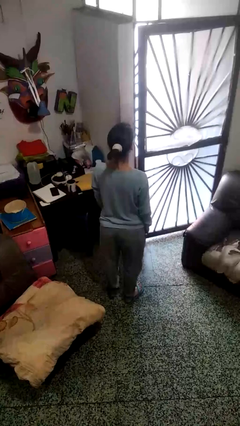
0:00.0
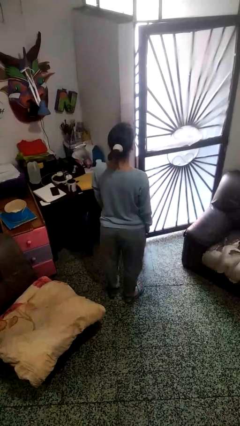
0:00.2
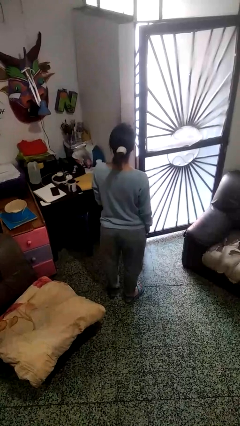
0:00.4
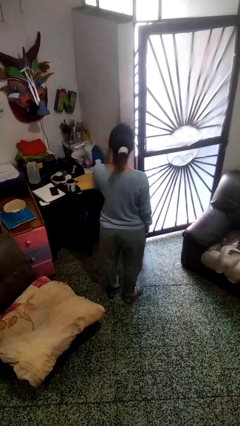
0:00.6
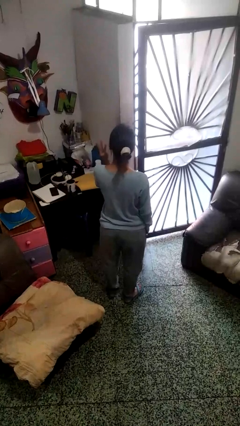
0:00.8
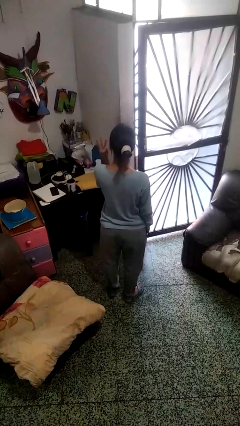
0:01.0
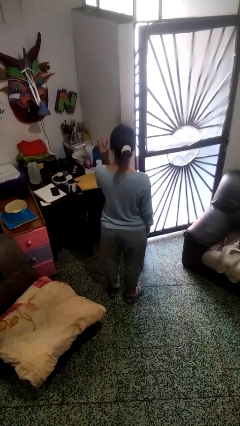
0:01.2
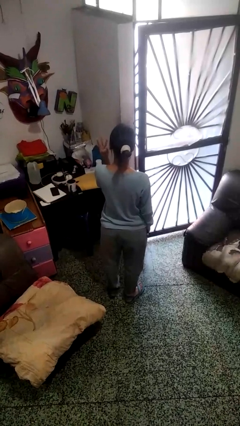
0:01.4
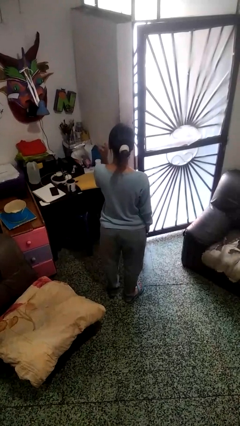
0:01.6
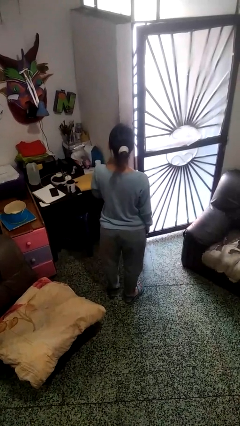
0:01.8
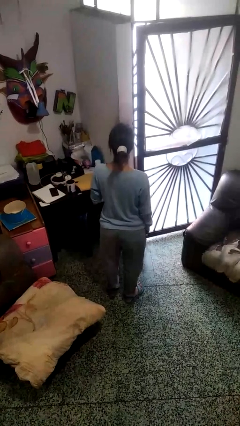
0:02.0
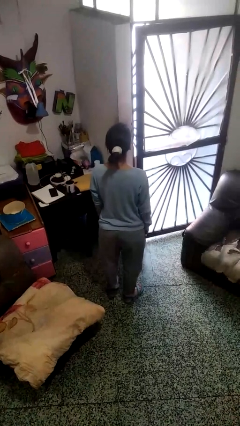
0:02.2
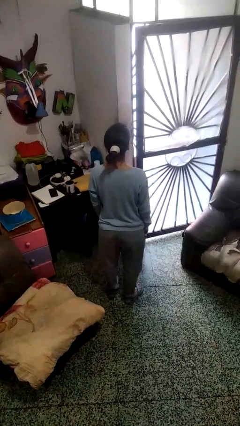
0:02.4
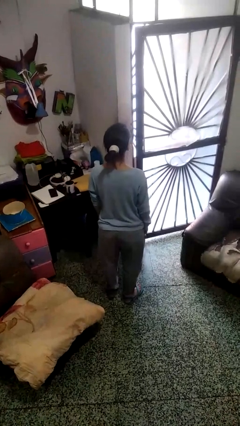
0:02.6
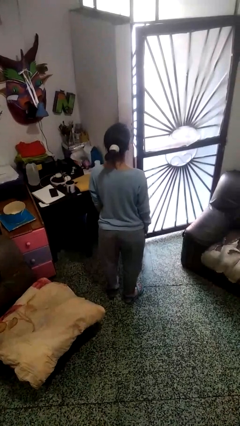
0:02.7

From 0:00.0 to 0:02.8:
person gestures number three

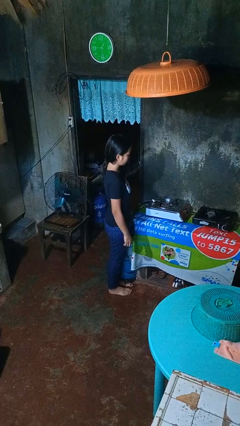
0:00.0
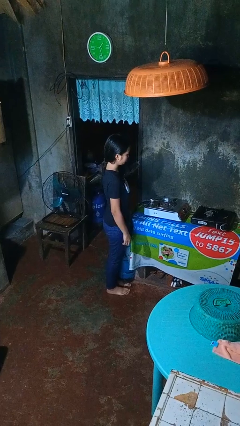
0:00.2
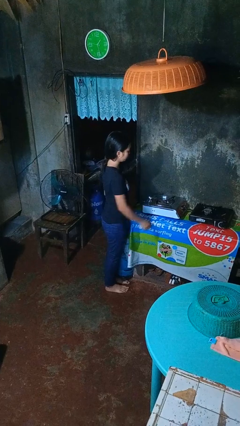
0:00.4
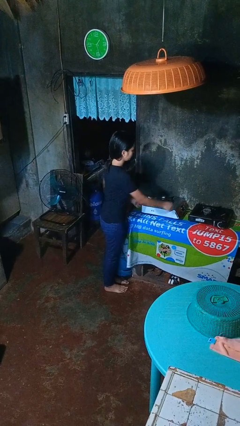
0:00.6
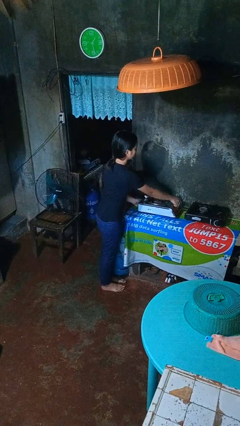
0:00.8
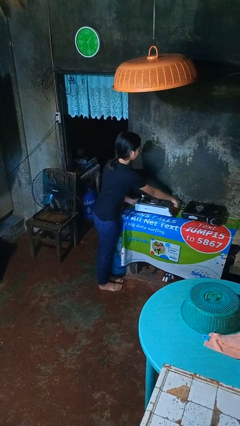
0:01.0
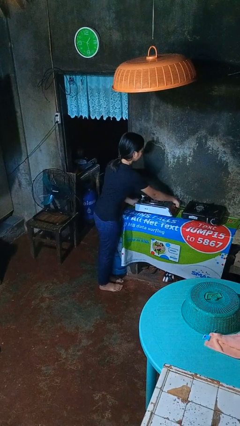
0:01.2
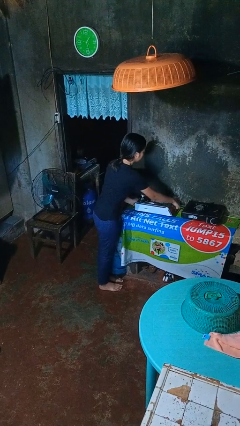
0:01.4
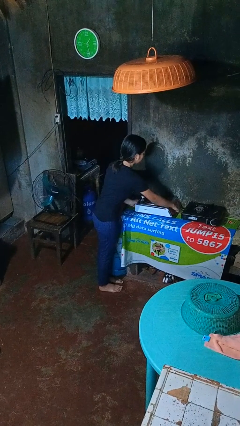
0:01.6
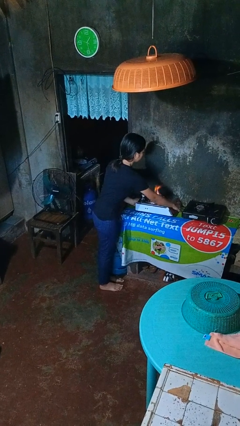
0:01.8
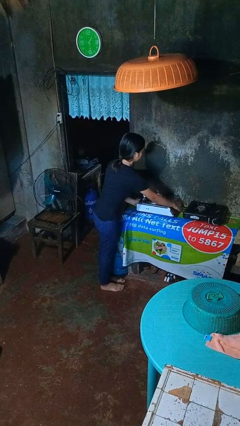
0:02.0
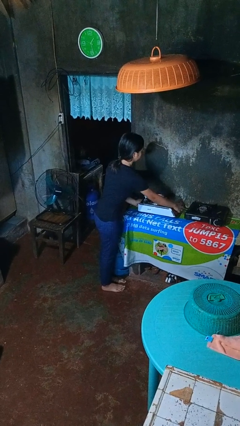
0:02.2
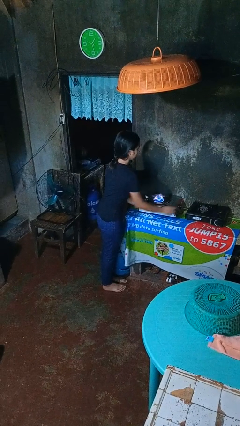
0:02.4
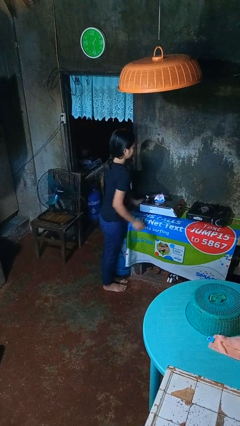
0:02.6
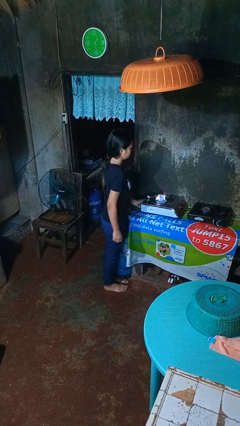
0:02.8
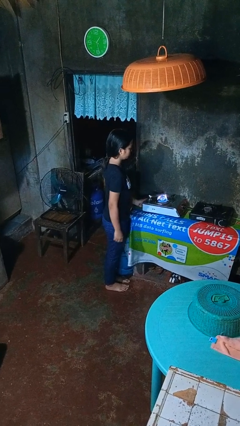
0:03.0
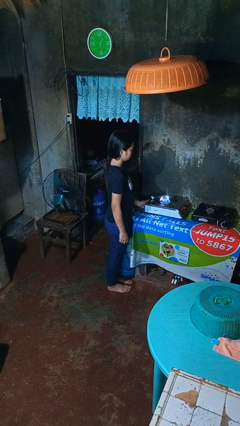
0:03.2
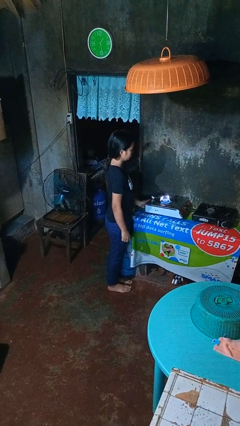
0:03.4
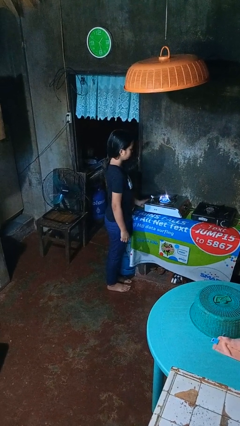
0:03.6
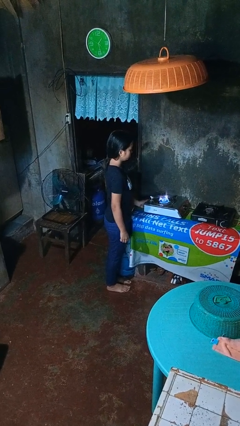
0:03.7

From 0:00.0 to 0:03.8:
person turns on stovetop

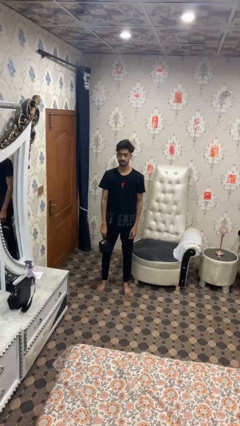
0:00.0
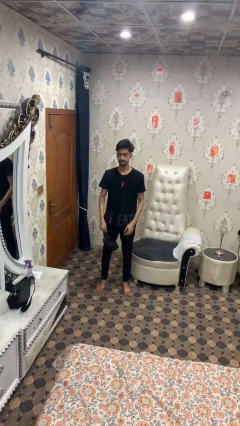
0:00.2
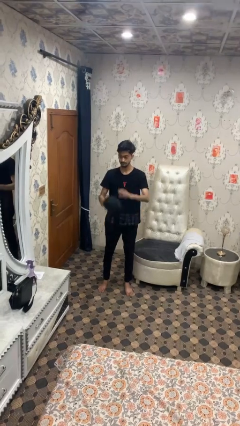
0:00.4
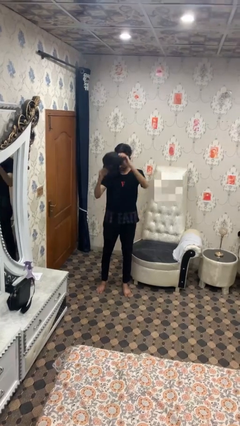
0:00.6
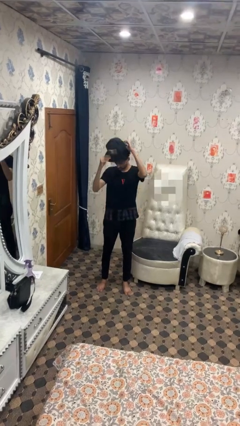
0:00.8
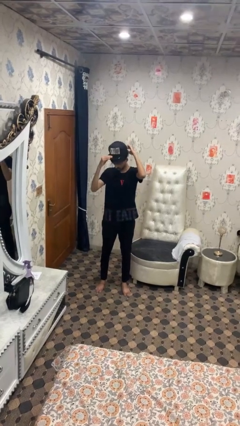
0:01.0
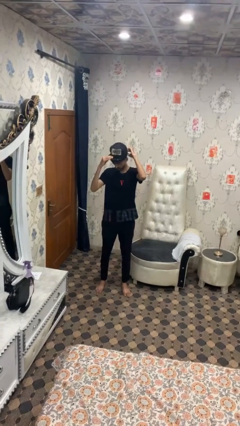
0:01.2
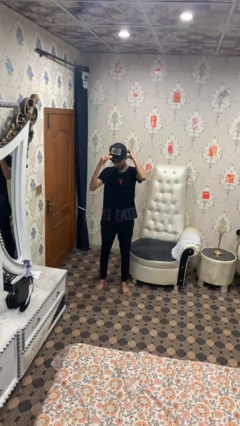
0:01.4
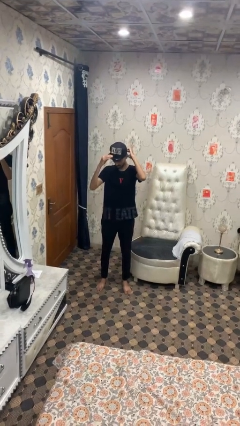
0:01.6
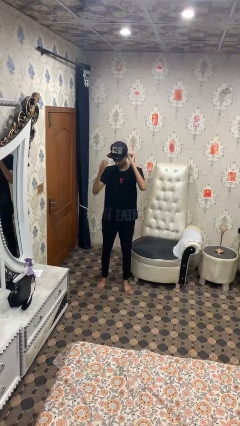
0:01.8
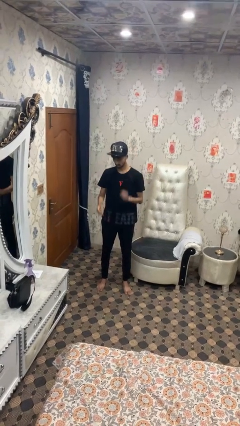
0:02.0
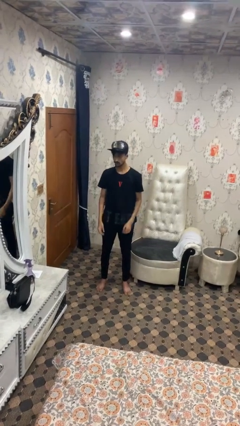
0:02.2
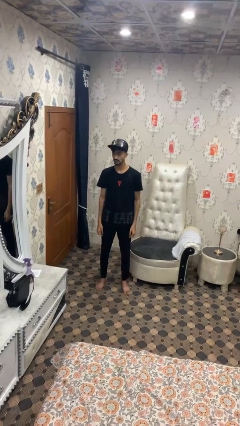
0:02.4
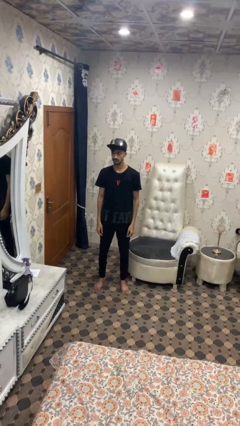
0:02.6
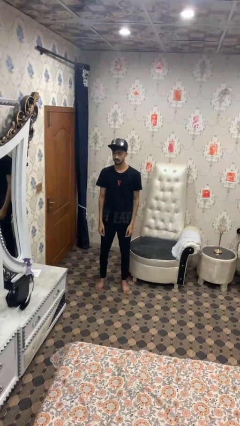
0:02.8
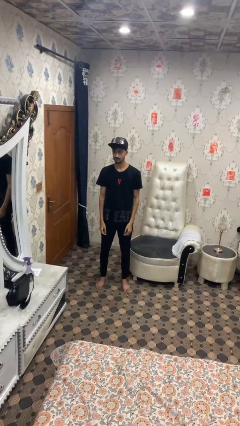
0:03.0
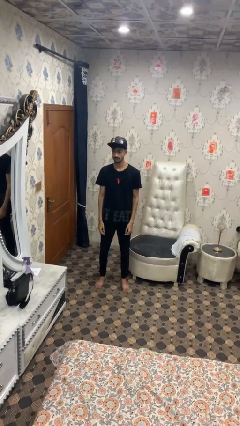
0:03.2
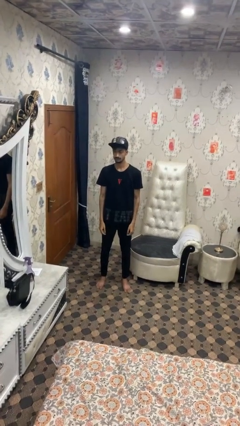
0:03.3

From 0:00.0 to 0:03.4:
person puts on hat

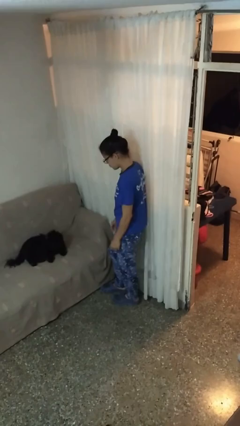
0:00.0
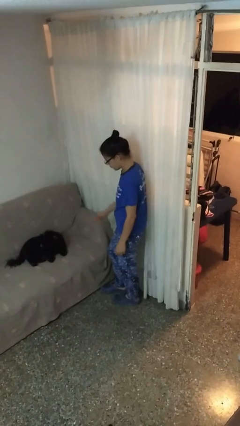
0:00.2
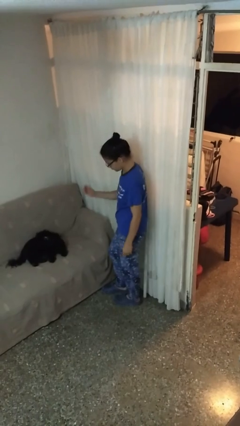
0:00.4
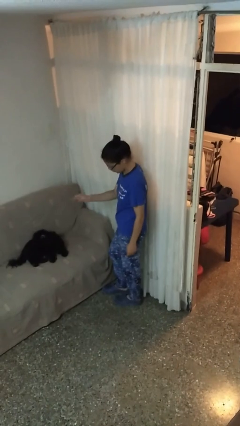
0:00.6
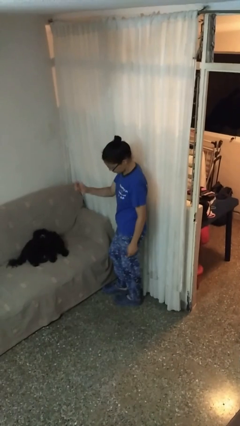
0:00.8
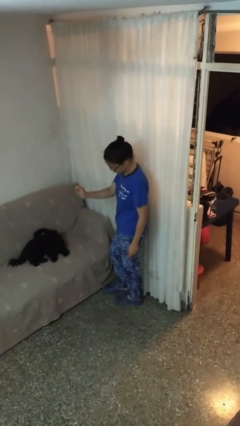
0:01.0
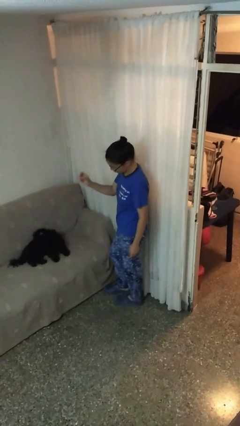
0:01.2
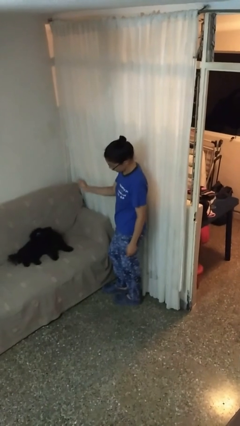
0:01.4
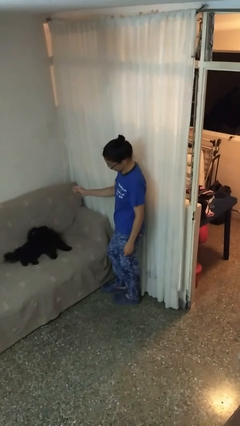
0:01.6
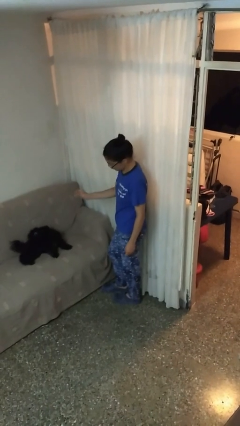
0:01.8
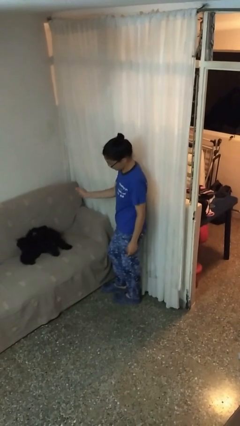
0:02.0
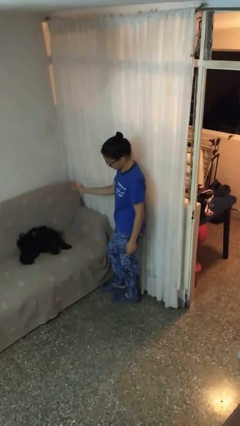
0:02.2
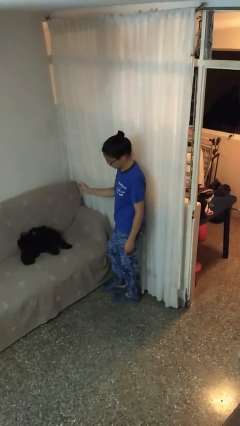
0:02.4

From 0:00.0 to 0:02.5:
person snaps fingers

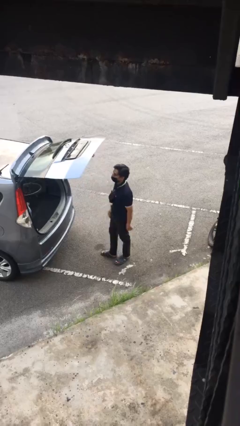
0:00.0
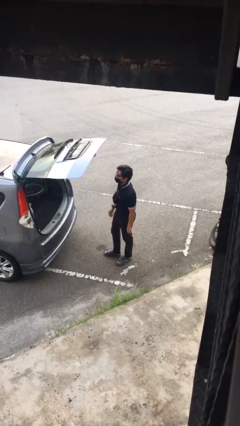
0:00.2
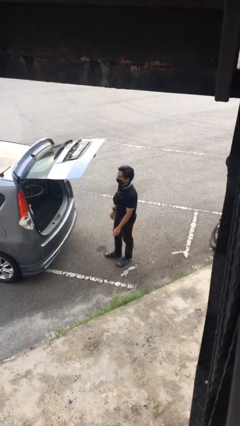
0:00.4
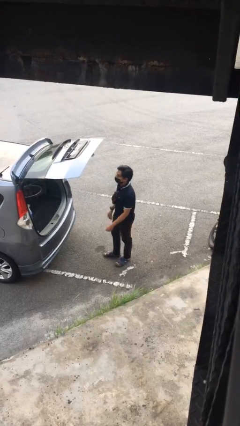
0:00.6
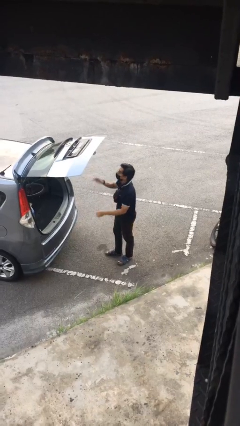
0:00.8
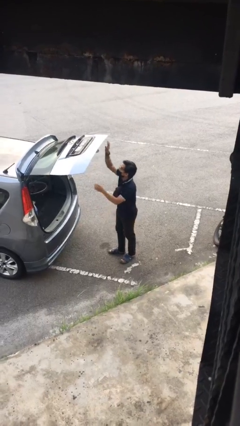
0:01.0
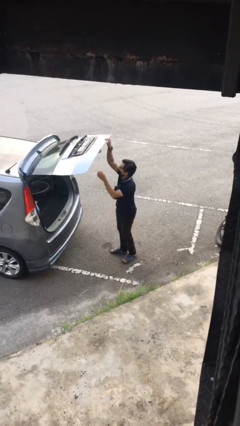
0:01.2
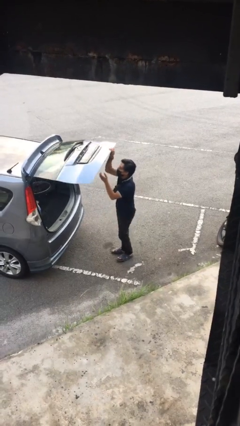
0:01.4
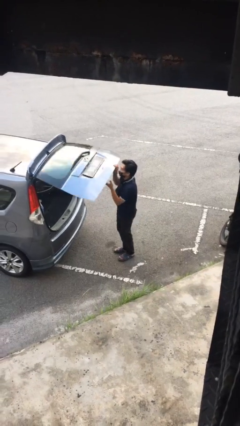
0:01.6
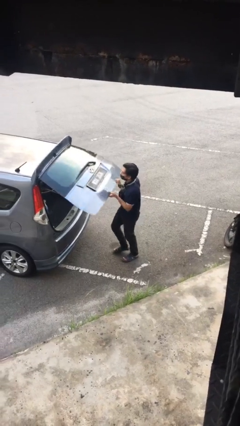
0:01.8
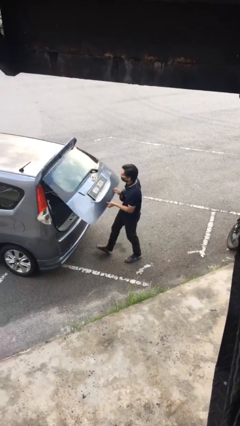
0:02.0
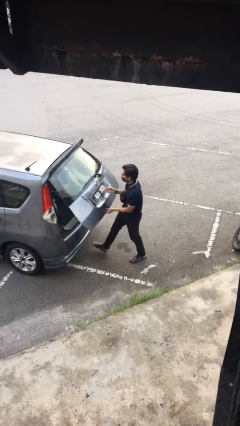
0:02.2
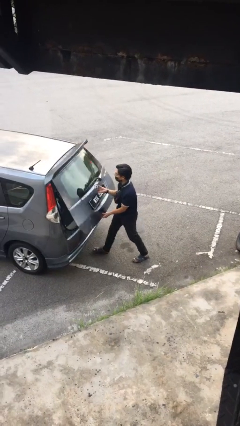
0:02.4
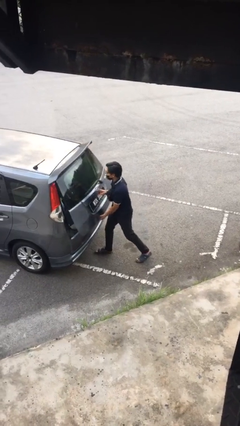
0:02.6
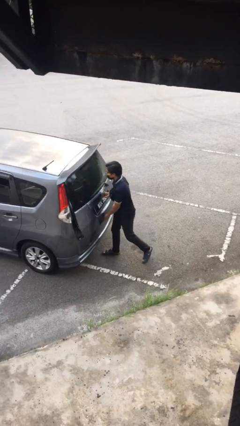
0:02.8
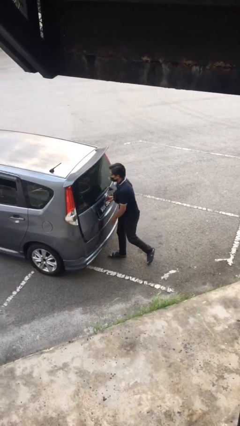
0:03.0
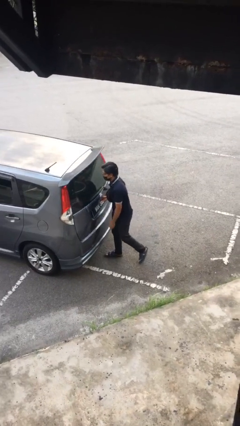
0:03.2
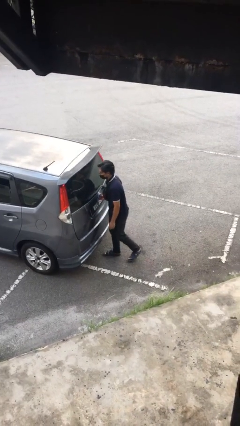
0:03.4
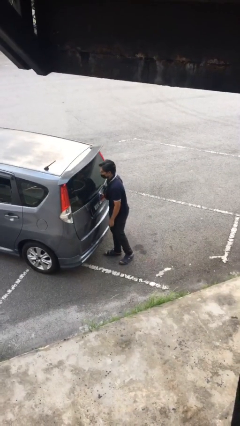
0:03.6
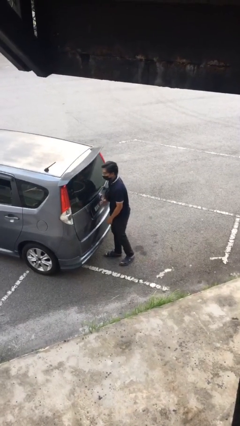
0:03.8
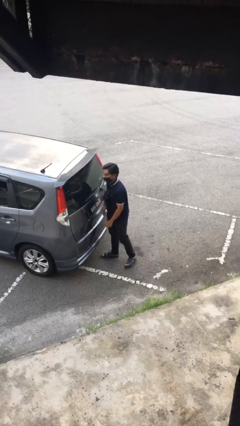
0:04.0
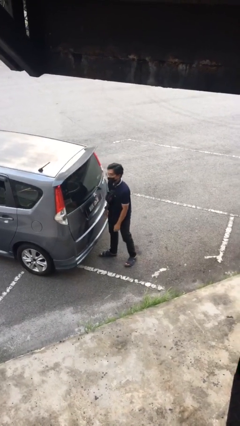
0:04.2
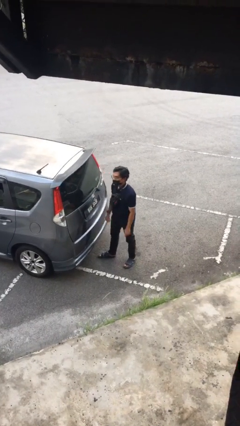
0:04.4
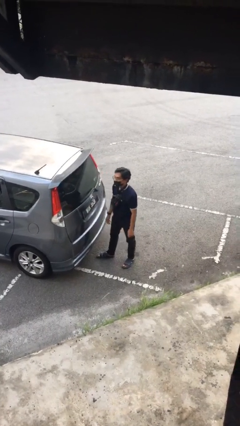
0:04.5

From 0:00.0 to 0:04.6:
person closes car trunk

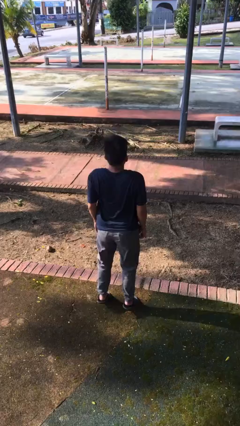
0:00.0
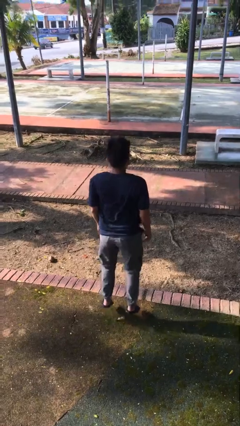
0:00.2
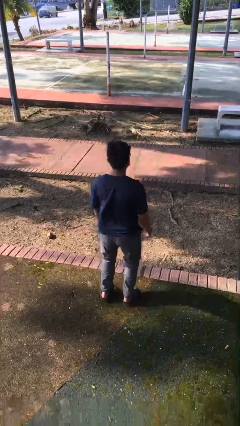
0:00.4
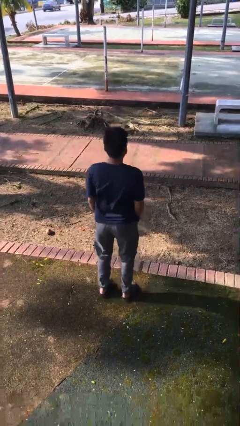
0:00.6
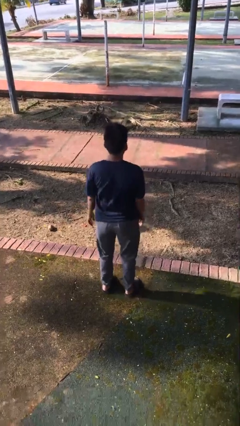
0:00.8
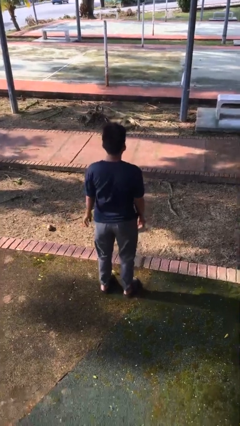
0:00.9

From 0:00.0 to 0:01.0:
person jumps
